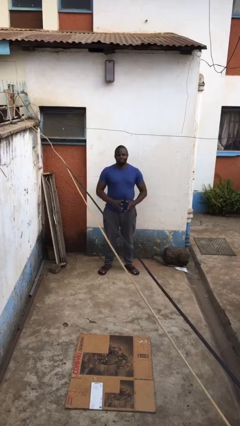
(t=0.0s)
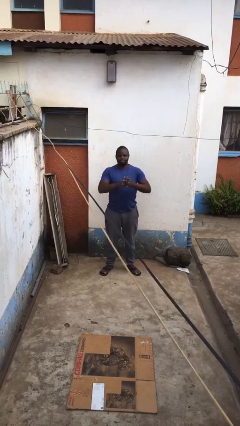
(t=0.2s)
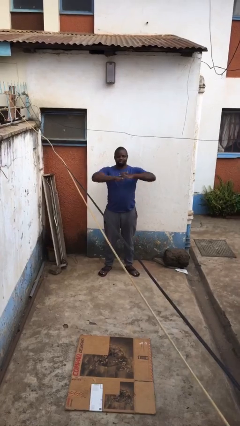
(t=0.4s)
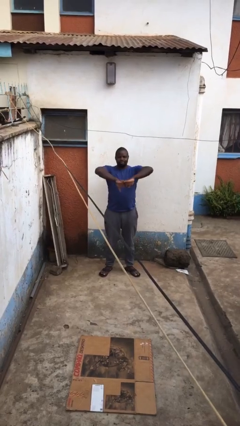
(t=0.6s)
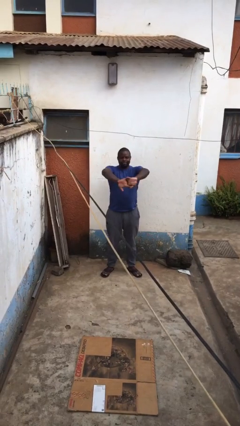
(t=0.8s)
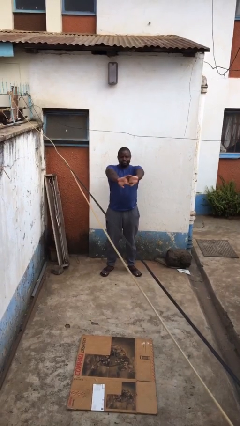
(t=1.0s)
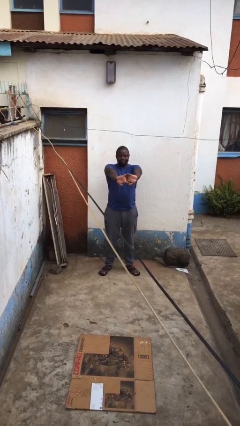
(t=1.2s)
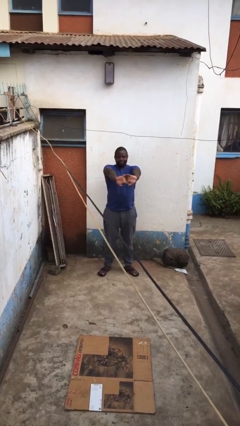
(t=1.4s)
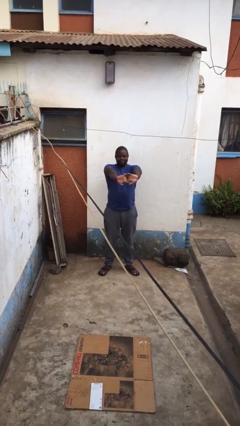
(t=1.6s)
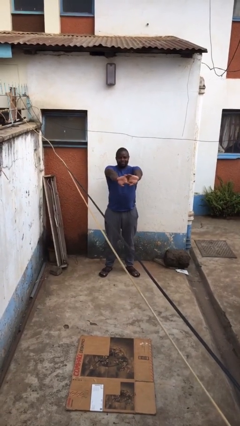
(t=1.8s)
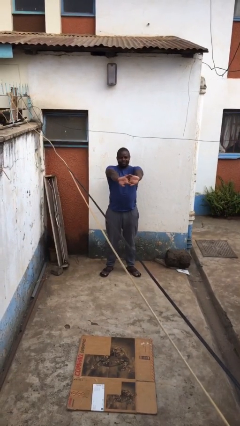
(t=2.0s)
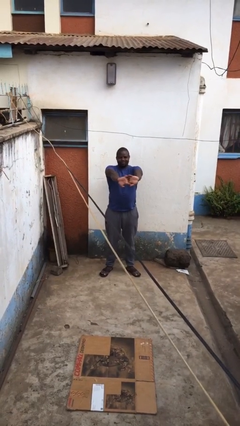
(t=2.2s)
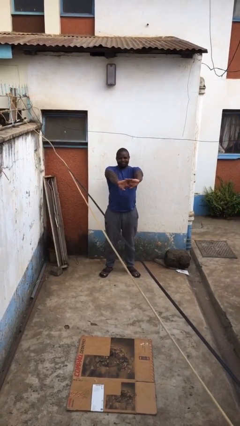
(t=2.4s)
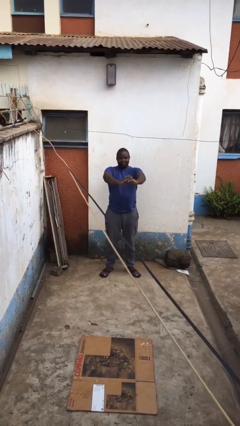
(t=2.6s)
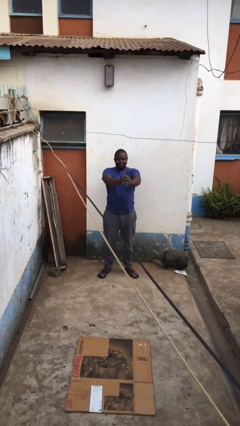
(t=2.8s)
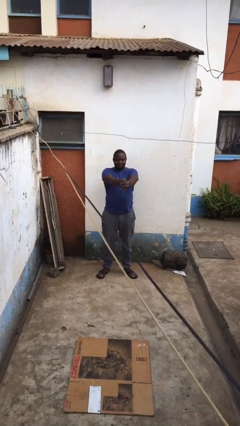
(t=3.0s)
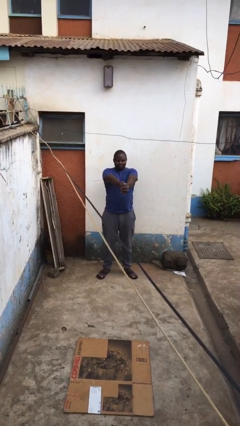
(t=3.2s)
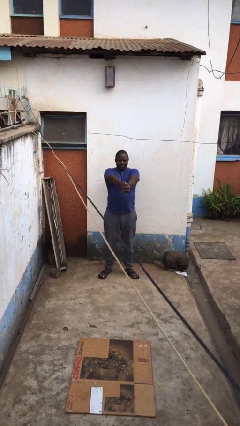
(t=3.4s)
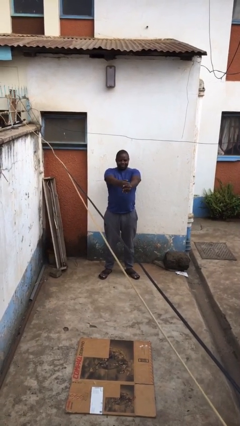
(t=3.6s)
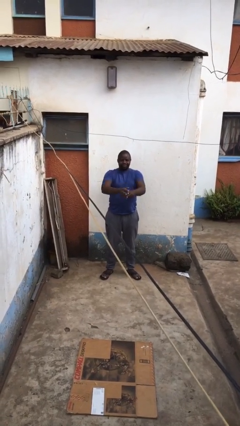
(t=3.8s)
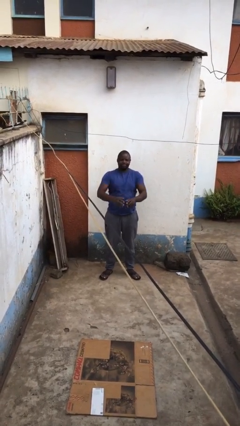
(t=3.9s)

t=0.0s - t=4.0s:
person cracks knuckles

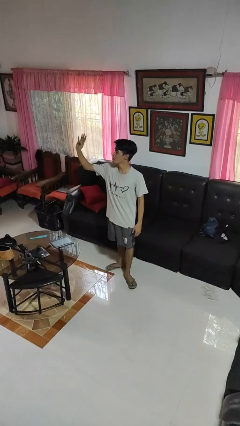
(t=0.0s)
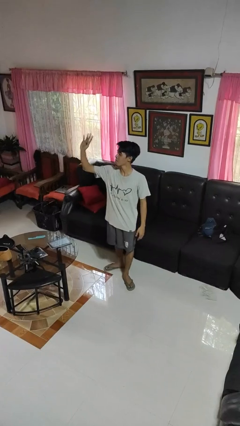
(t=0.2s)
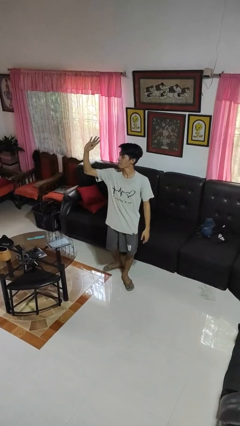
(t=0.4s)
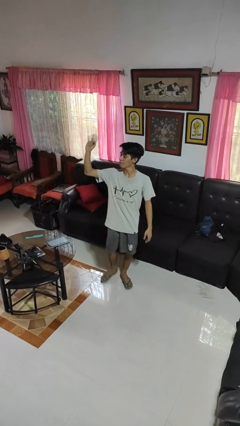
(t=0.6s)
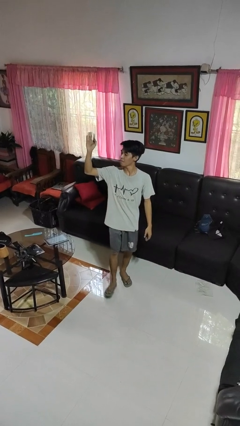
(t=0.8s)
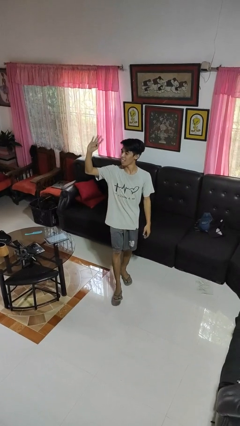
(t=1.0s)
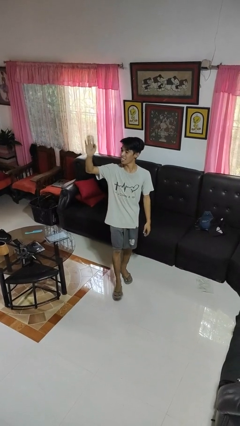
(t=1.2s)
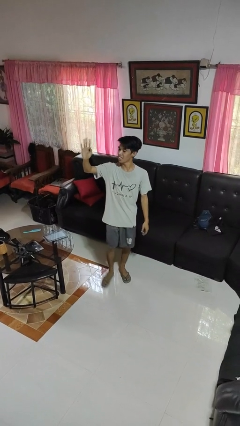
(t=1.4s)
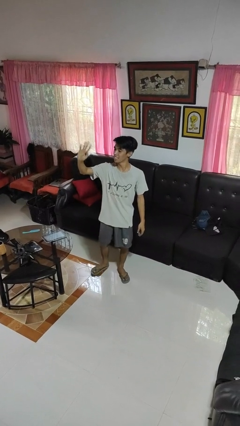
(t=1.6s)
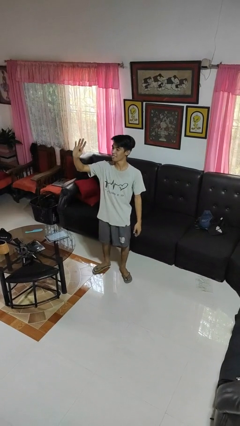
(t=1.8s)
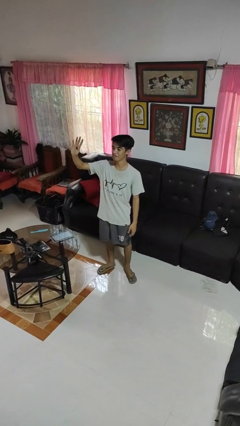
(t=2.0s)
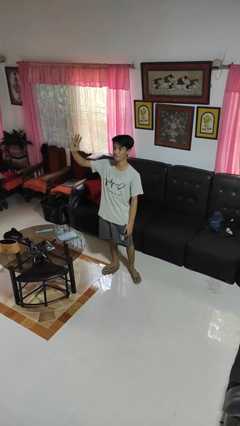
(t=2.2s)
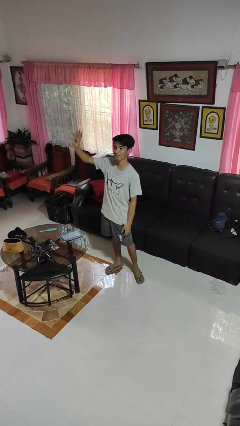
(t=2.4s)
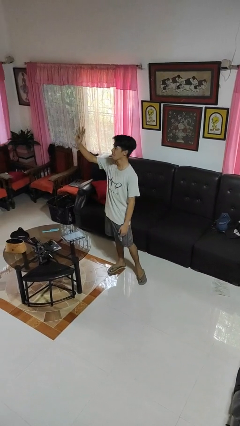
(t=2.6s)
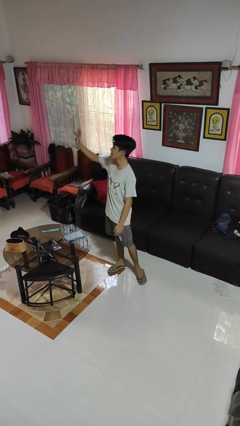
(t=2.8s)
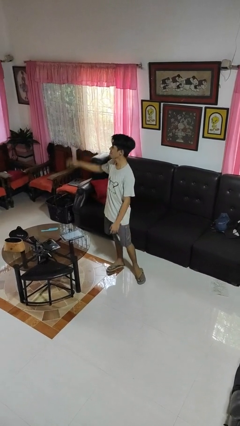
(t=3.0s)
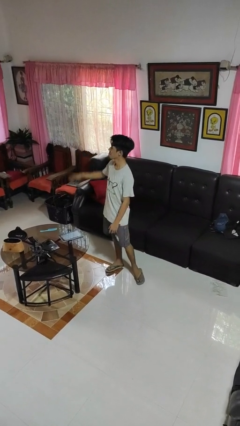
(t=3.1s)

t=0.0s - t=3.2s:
person waves at person

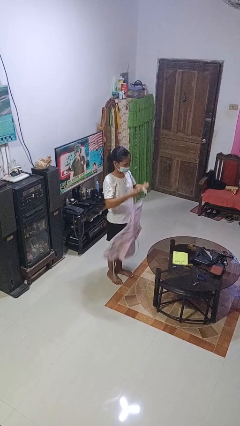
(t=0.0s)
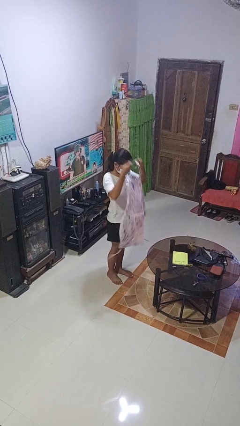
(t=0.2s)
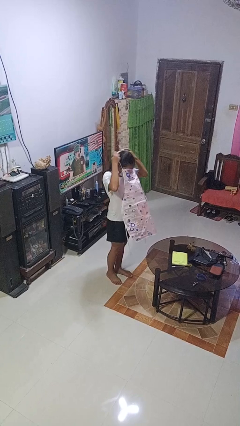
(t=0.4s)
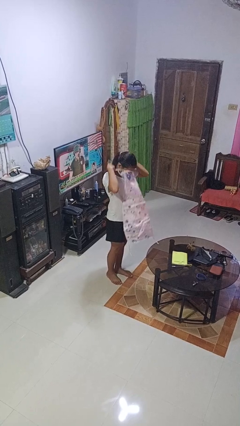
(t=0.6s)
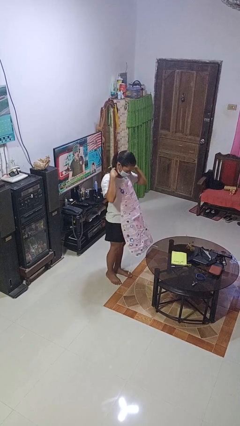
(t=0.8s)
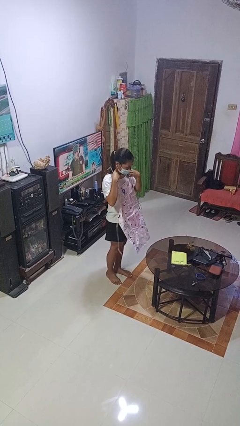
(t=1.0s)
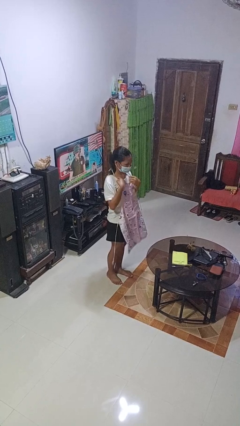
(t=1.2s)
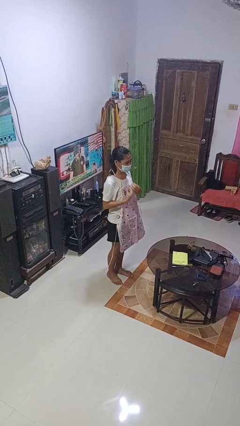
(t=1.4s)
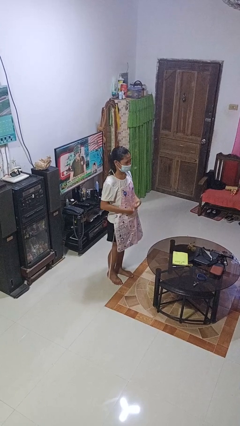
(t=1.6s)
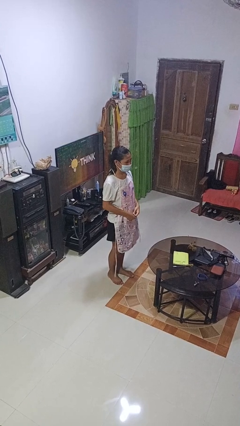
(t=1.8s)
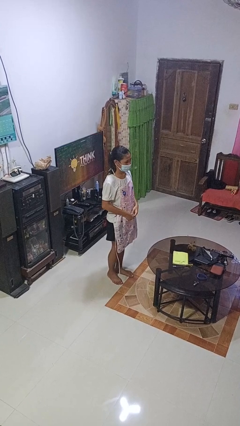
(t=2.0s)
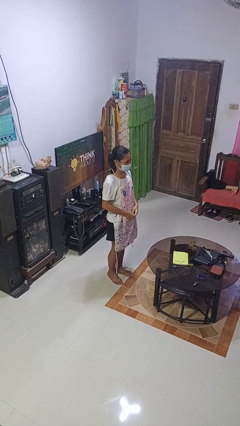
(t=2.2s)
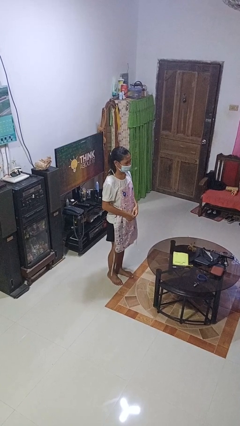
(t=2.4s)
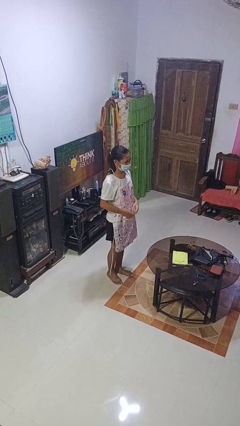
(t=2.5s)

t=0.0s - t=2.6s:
person puts on apron

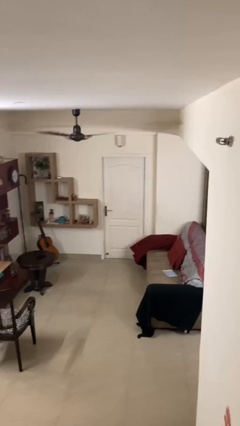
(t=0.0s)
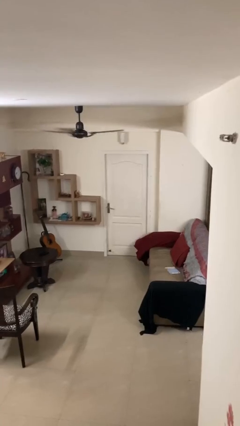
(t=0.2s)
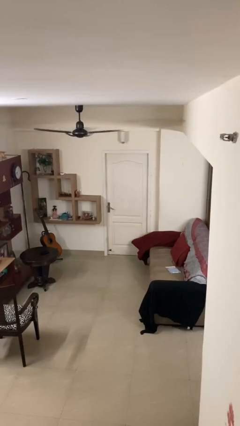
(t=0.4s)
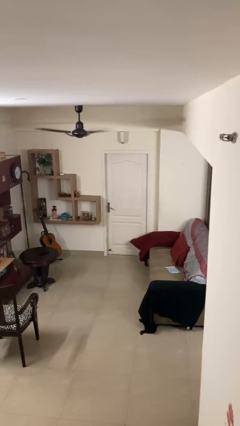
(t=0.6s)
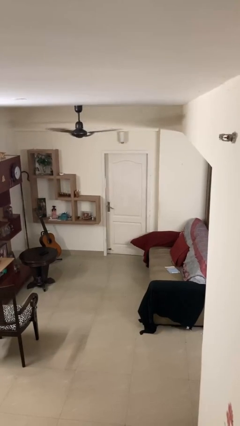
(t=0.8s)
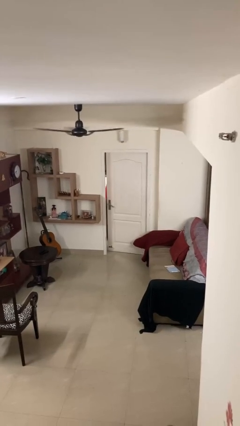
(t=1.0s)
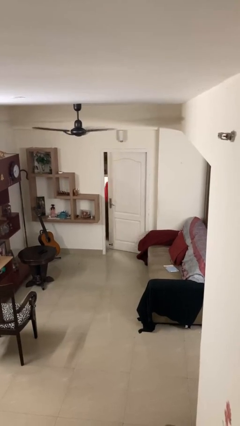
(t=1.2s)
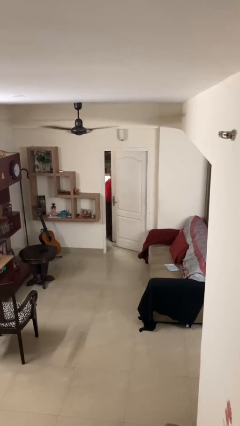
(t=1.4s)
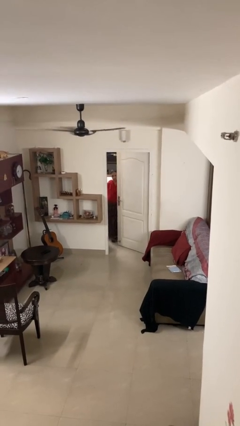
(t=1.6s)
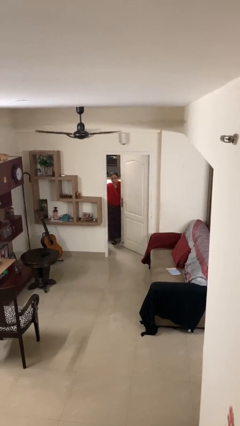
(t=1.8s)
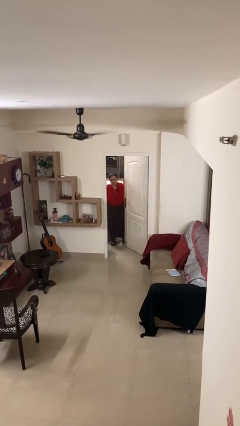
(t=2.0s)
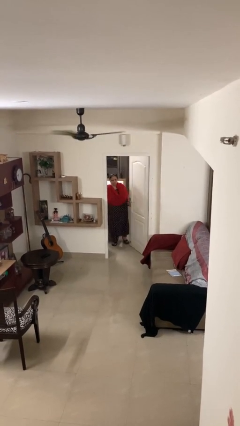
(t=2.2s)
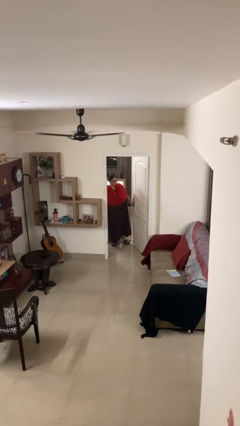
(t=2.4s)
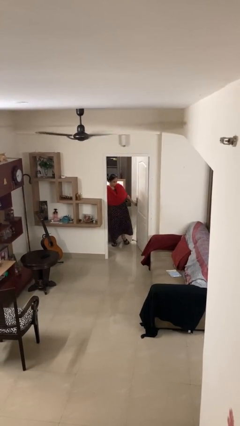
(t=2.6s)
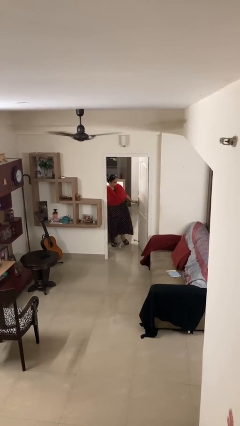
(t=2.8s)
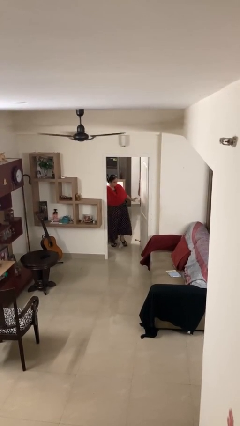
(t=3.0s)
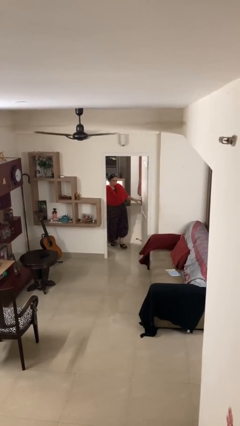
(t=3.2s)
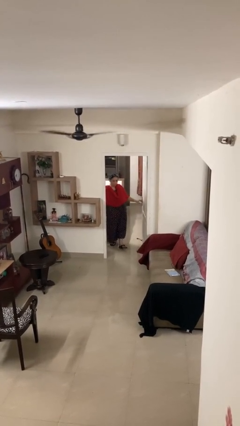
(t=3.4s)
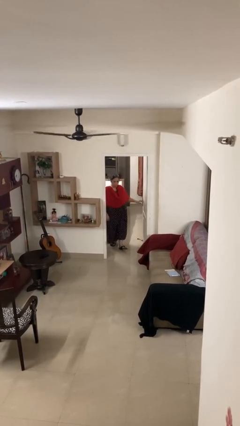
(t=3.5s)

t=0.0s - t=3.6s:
person opens facility door

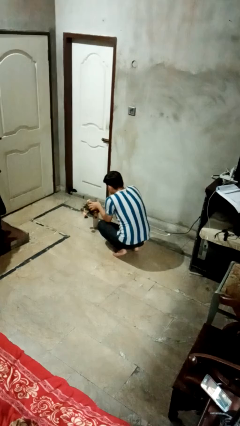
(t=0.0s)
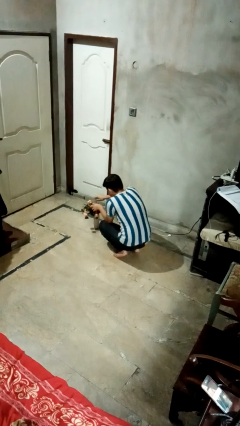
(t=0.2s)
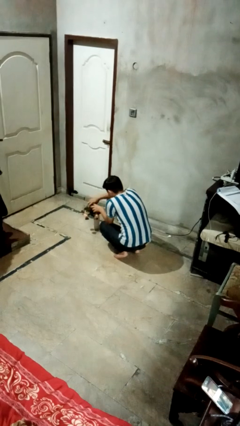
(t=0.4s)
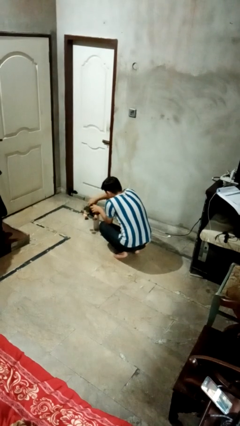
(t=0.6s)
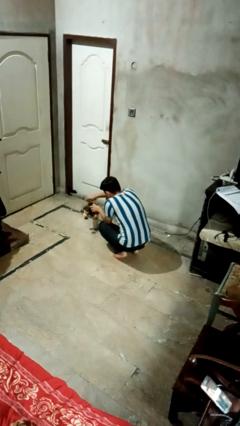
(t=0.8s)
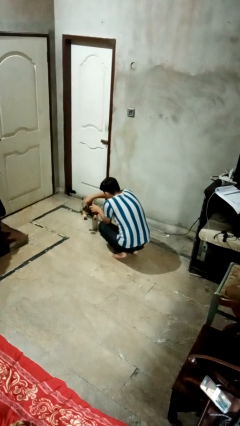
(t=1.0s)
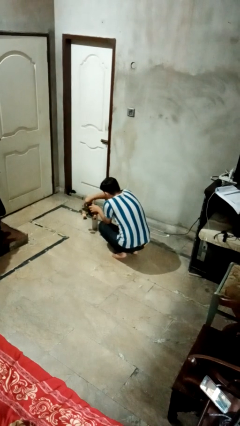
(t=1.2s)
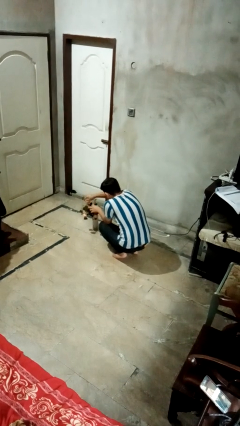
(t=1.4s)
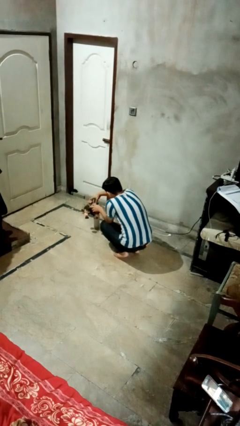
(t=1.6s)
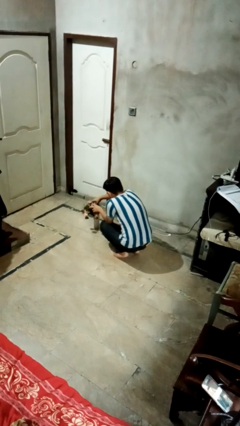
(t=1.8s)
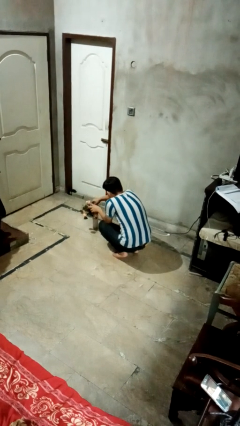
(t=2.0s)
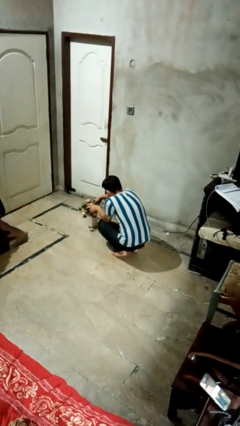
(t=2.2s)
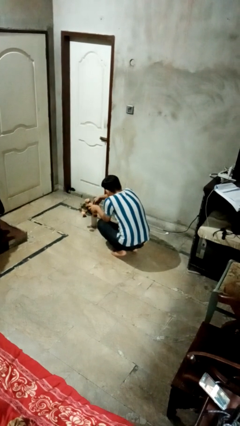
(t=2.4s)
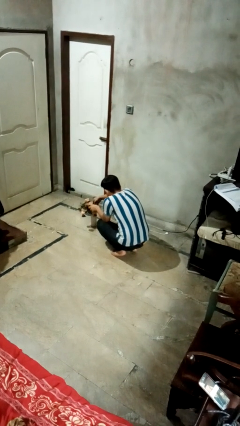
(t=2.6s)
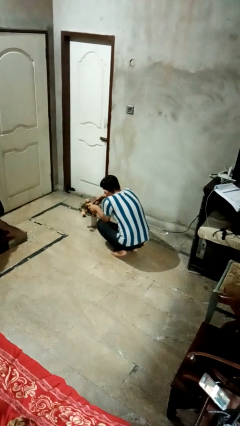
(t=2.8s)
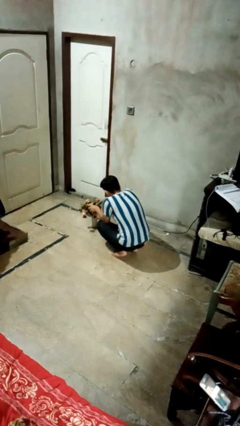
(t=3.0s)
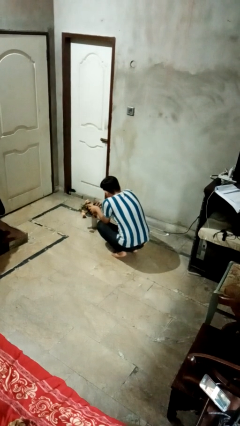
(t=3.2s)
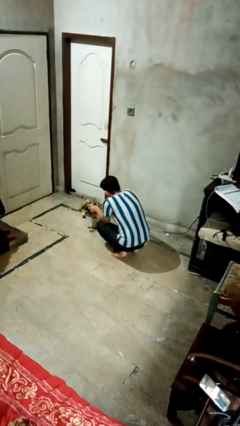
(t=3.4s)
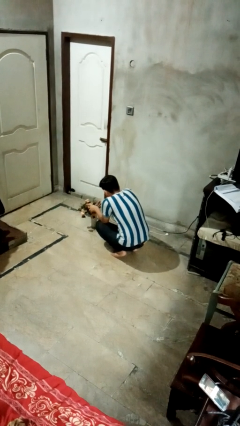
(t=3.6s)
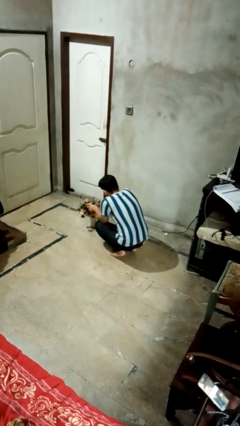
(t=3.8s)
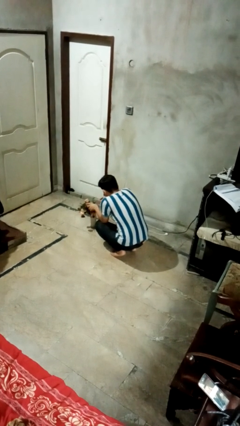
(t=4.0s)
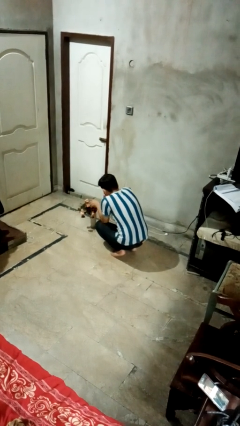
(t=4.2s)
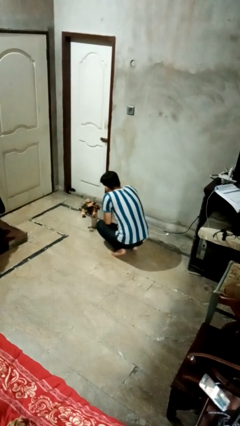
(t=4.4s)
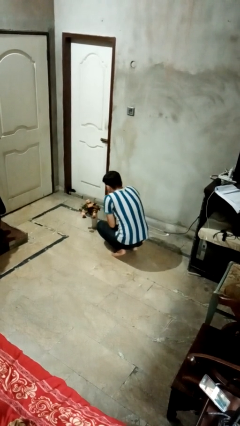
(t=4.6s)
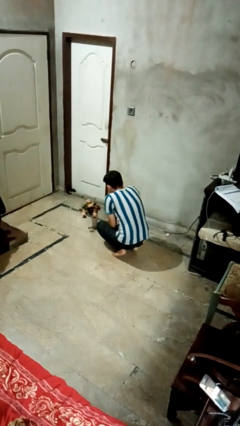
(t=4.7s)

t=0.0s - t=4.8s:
person arranges flowers in vase
